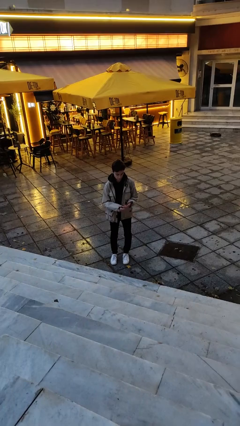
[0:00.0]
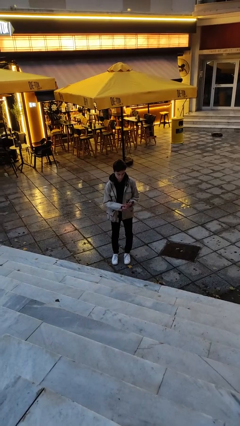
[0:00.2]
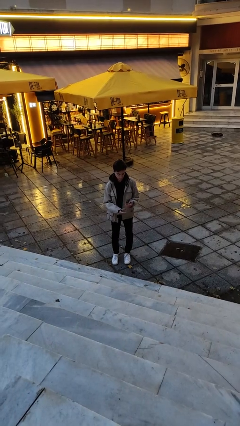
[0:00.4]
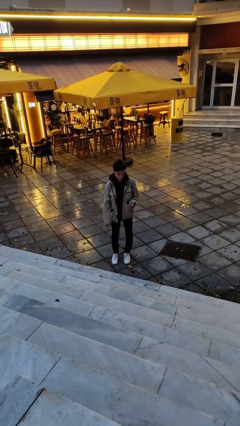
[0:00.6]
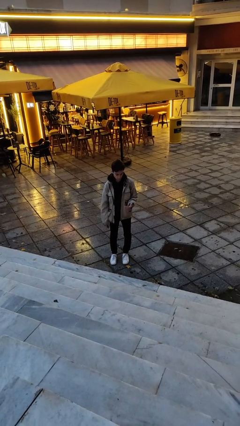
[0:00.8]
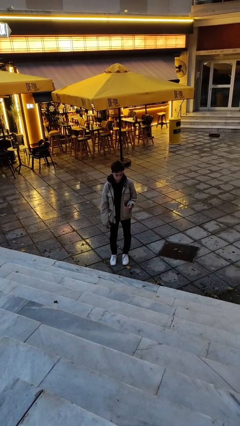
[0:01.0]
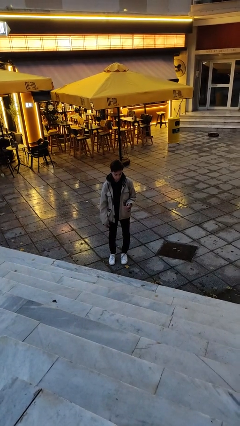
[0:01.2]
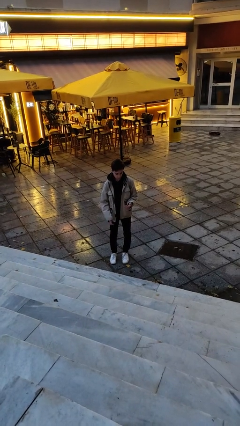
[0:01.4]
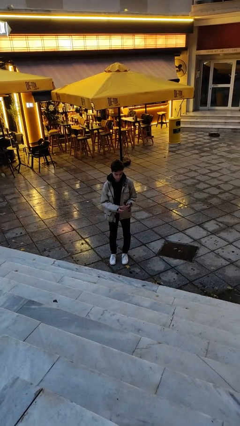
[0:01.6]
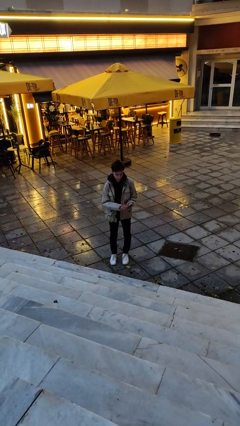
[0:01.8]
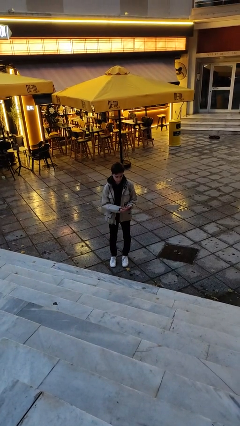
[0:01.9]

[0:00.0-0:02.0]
person puts on ring

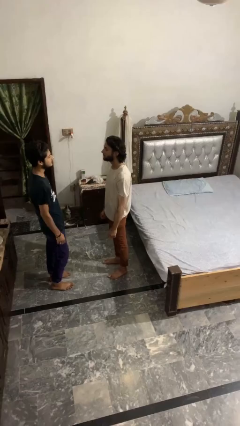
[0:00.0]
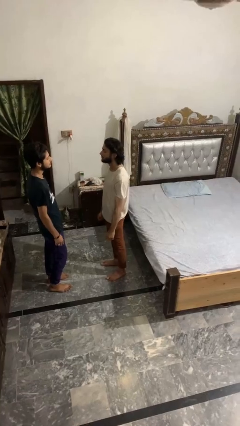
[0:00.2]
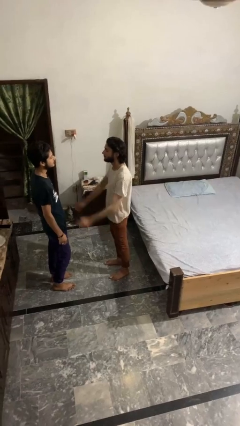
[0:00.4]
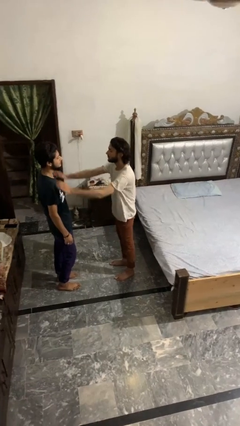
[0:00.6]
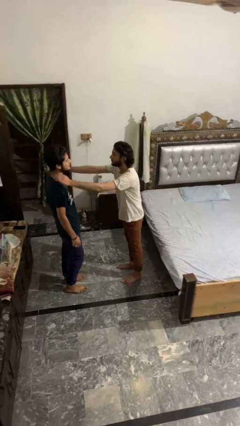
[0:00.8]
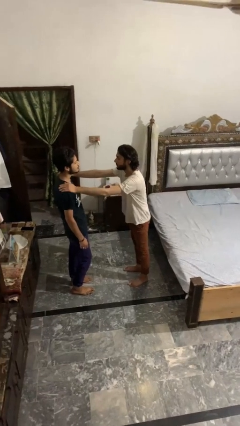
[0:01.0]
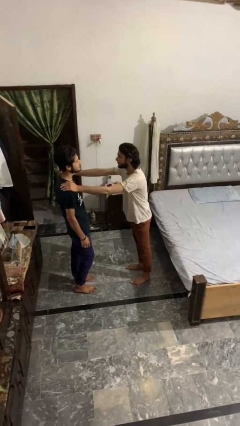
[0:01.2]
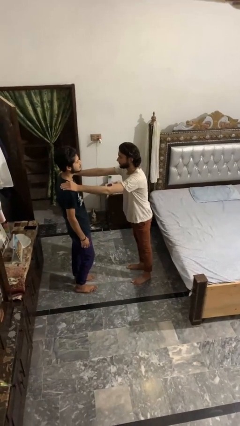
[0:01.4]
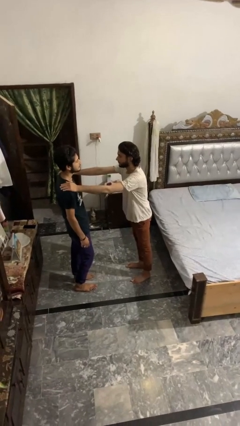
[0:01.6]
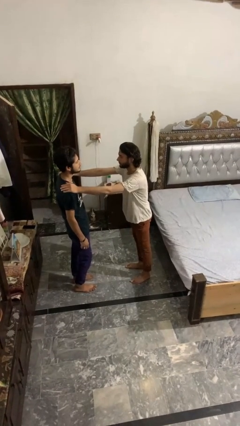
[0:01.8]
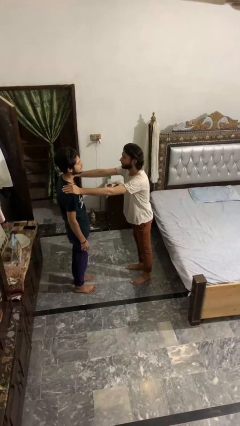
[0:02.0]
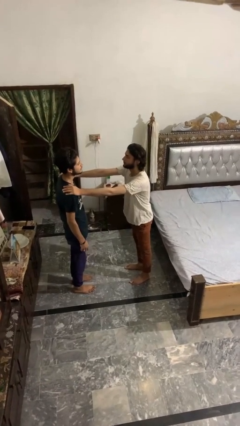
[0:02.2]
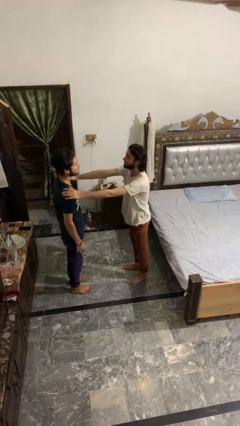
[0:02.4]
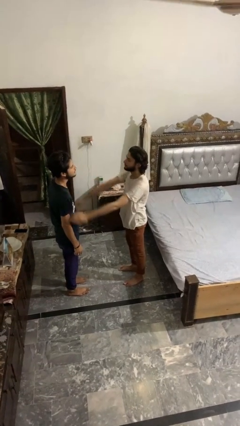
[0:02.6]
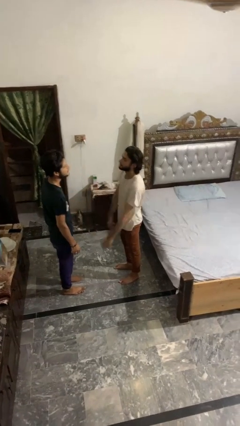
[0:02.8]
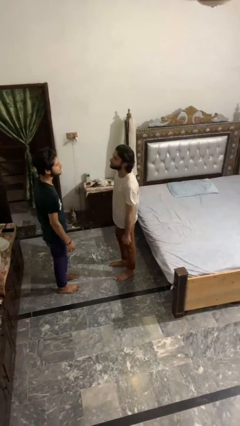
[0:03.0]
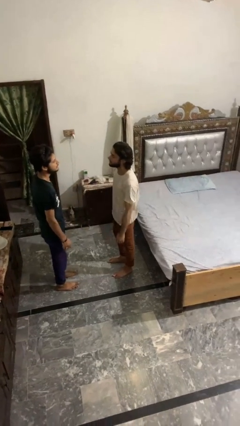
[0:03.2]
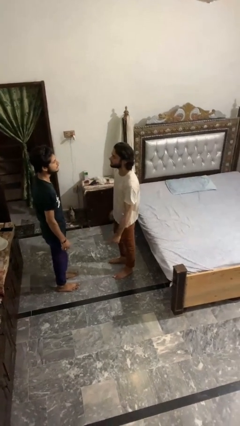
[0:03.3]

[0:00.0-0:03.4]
person pounds shoulders of person

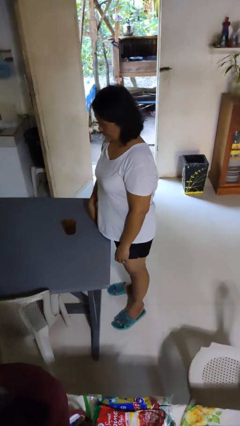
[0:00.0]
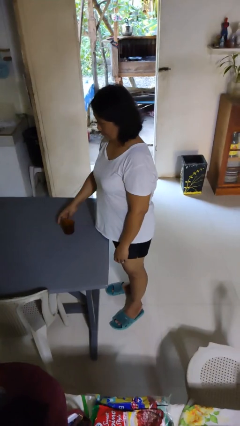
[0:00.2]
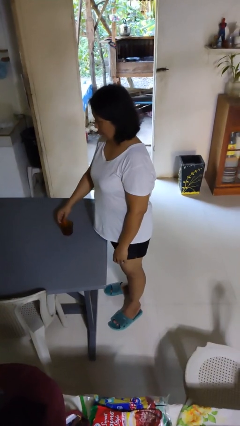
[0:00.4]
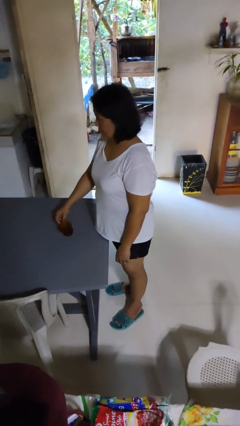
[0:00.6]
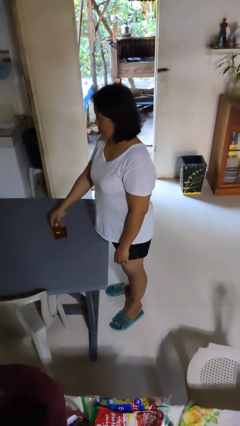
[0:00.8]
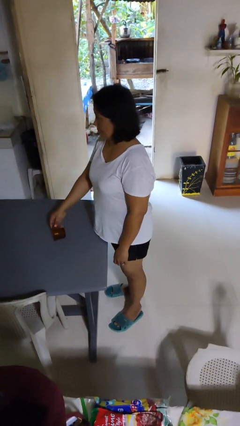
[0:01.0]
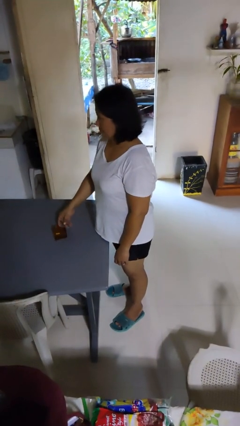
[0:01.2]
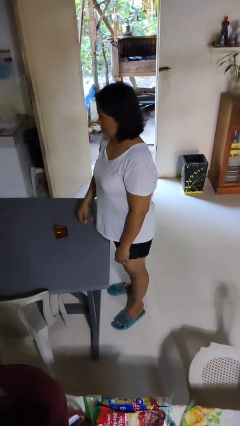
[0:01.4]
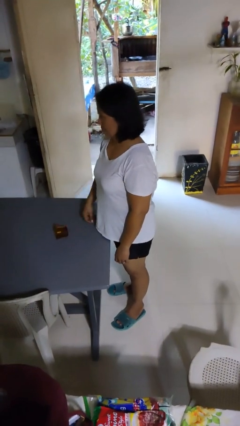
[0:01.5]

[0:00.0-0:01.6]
person knocks over glass

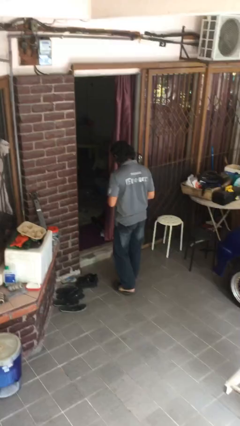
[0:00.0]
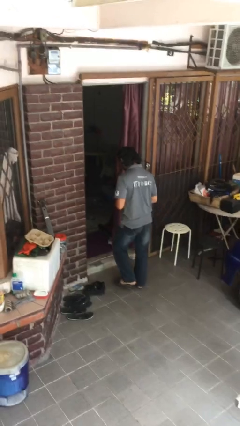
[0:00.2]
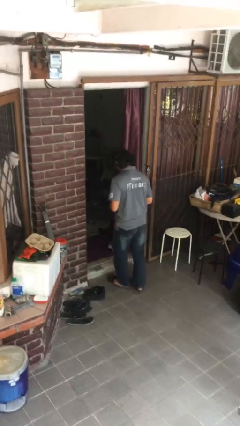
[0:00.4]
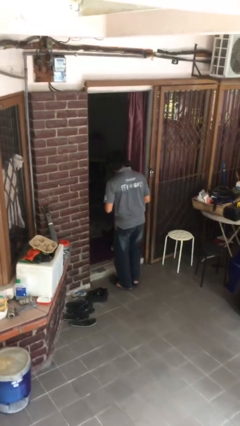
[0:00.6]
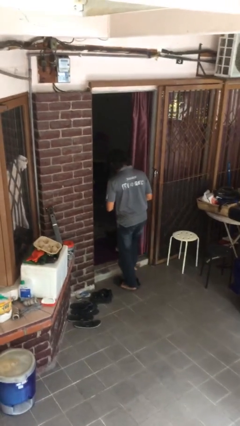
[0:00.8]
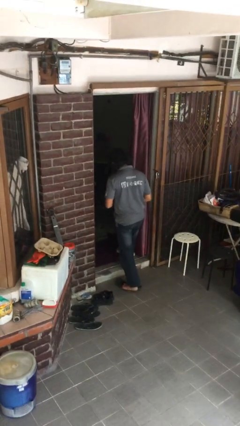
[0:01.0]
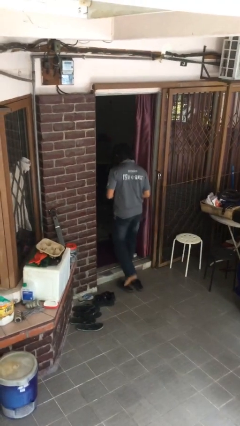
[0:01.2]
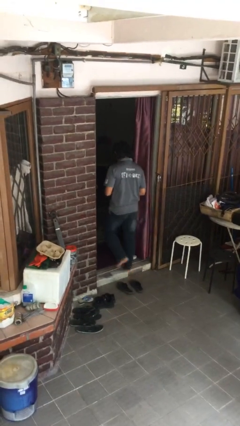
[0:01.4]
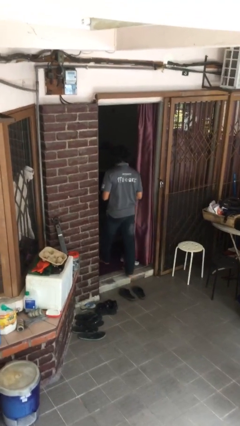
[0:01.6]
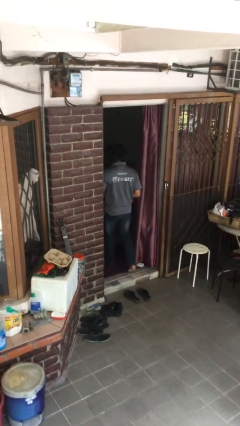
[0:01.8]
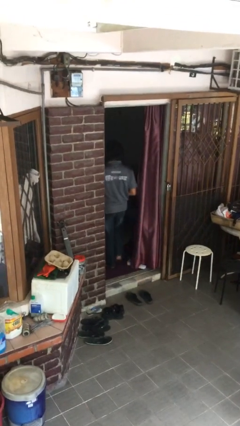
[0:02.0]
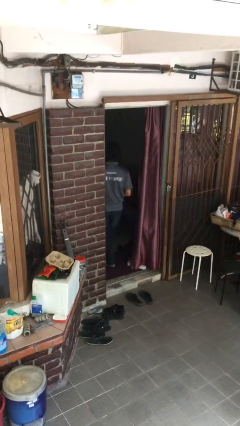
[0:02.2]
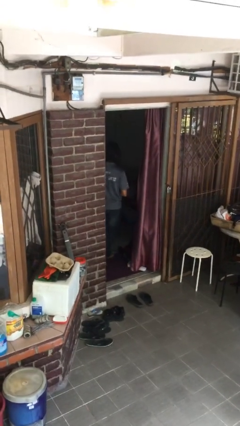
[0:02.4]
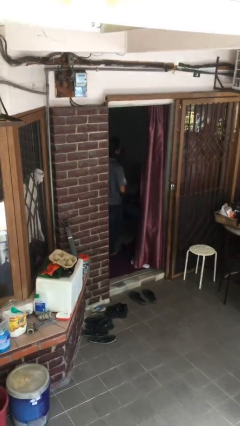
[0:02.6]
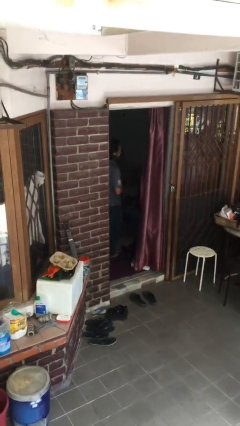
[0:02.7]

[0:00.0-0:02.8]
person exits scene through structure

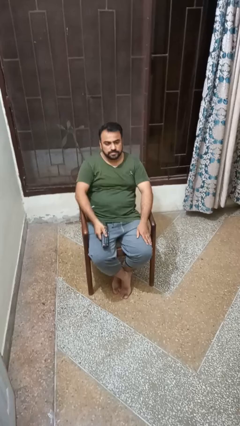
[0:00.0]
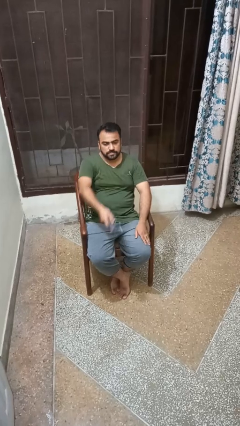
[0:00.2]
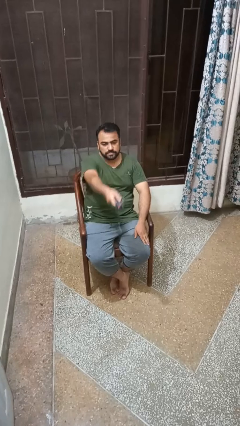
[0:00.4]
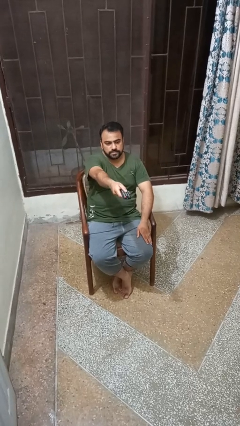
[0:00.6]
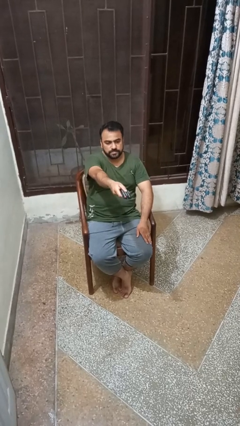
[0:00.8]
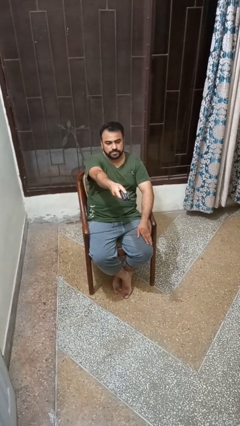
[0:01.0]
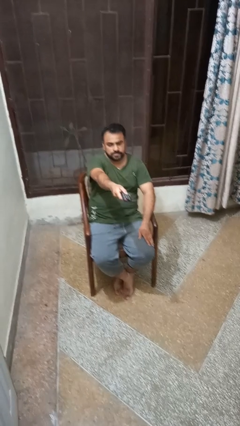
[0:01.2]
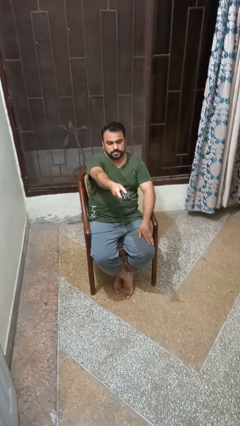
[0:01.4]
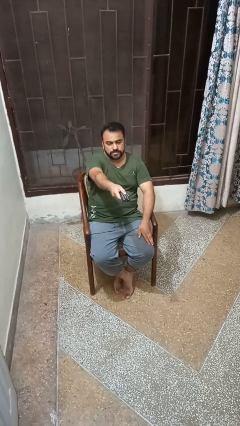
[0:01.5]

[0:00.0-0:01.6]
person uses television remote

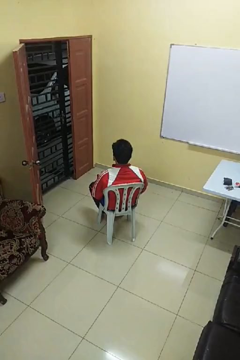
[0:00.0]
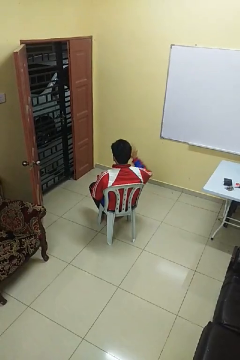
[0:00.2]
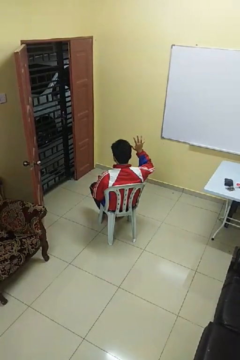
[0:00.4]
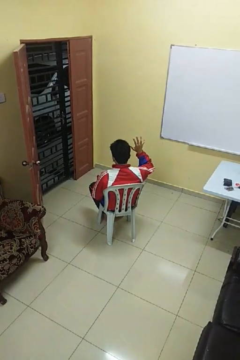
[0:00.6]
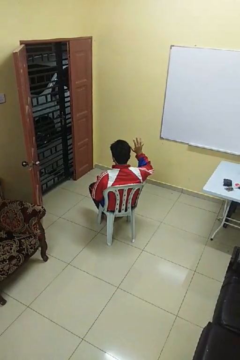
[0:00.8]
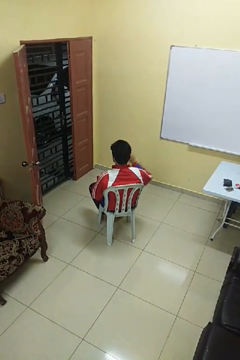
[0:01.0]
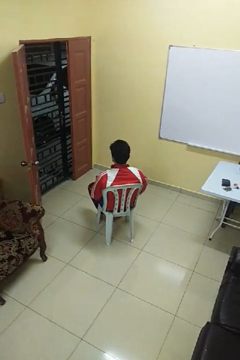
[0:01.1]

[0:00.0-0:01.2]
person gestures number five

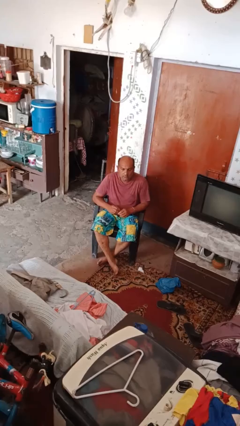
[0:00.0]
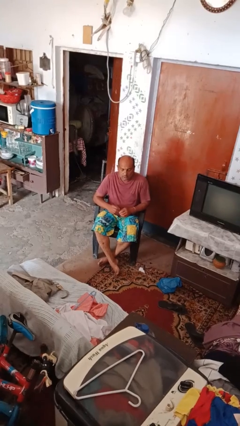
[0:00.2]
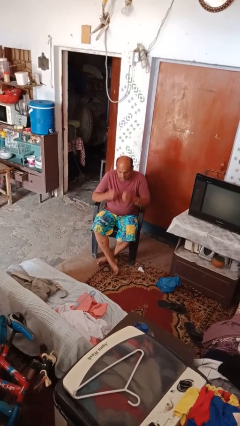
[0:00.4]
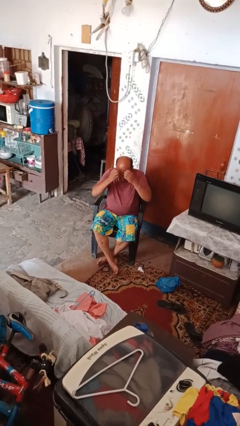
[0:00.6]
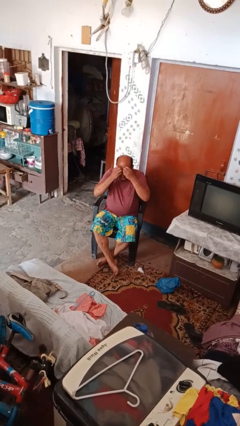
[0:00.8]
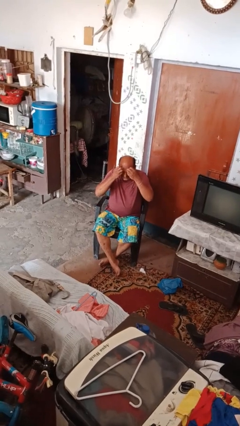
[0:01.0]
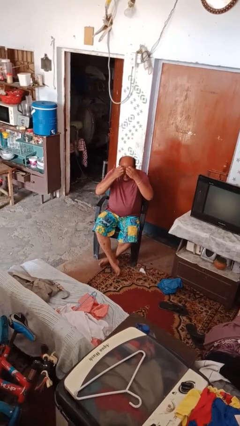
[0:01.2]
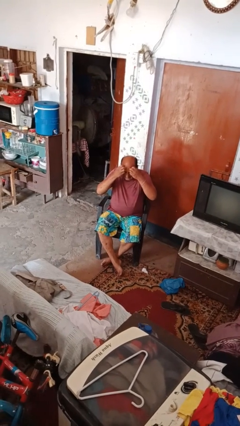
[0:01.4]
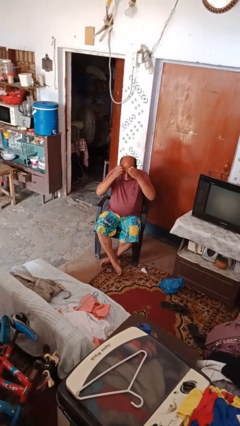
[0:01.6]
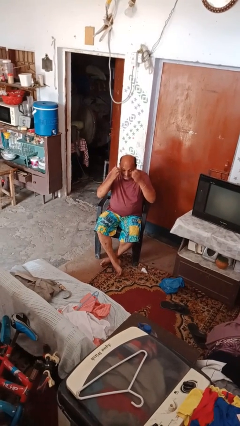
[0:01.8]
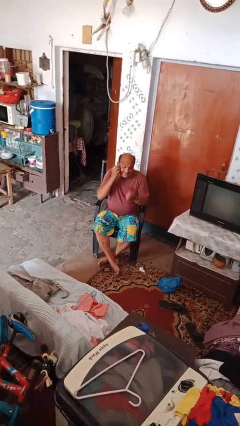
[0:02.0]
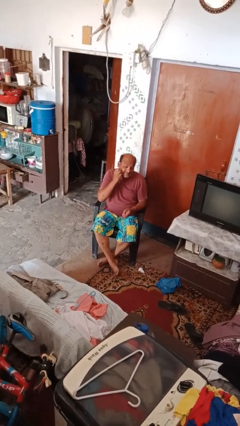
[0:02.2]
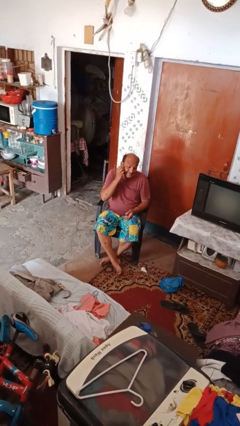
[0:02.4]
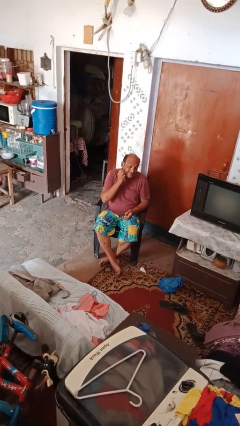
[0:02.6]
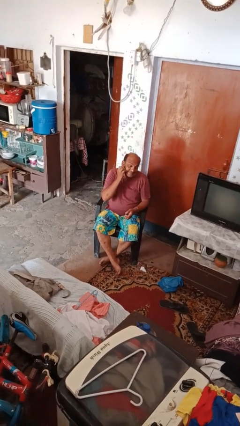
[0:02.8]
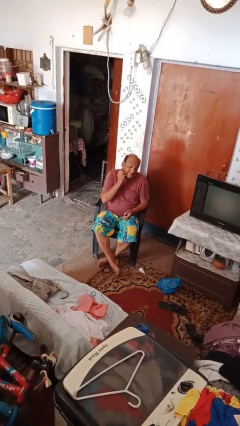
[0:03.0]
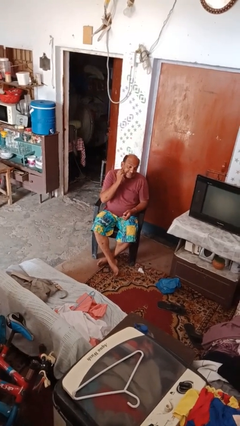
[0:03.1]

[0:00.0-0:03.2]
person scratches face

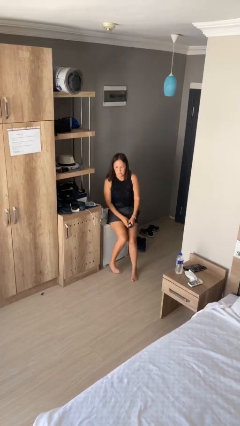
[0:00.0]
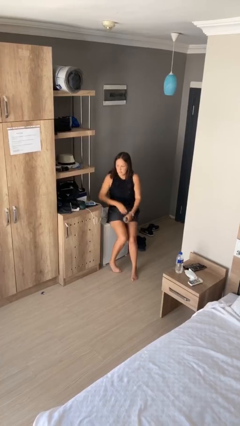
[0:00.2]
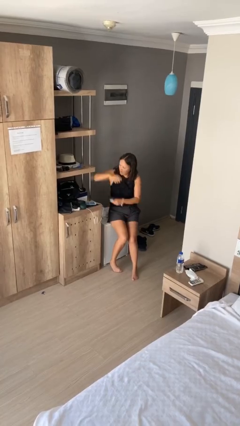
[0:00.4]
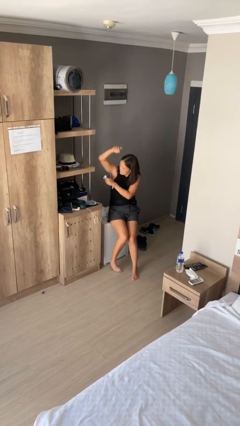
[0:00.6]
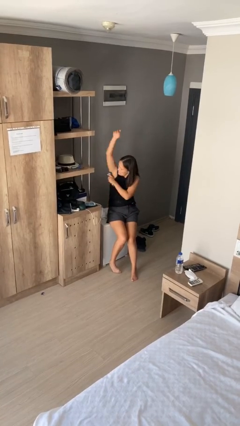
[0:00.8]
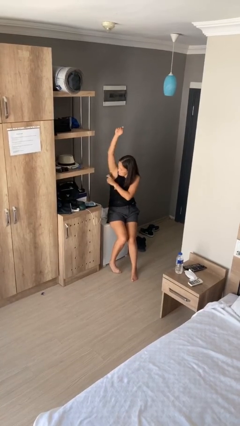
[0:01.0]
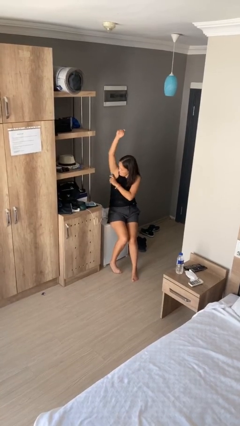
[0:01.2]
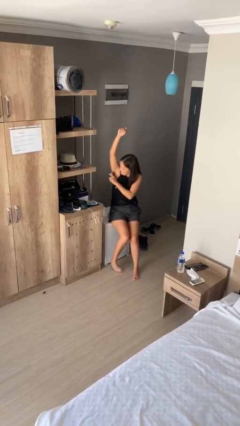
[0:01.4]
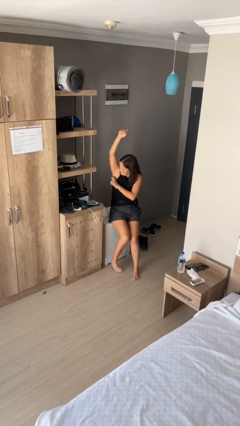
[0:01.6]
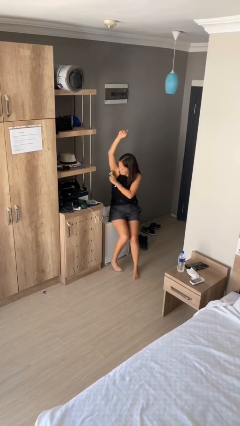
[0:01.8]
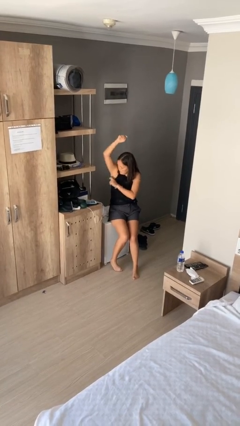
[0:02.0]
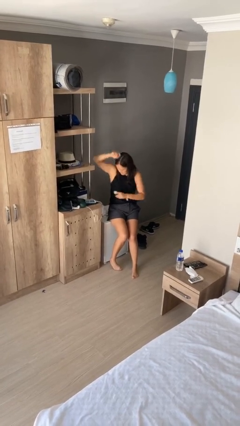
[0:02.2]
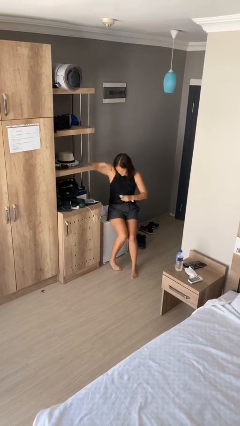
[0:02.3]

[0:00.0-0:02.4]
person applies deodorant
